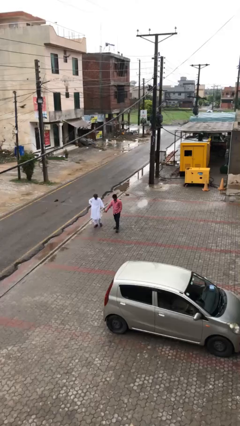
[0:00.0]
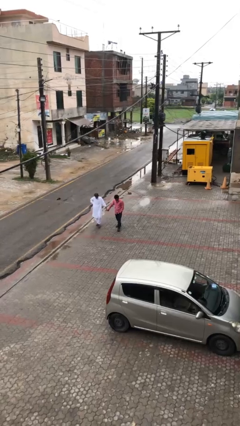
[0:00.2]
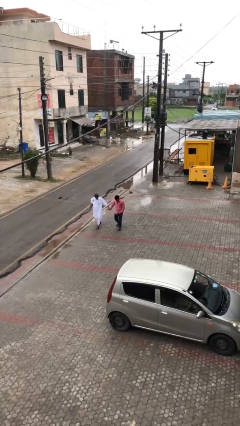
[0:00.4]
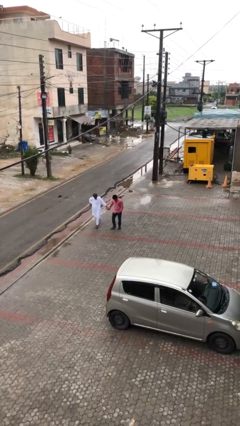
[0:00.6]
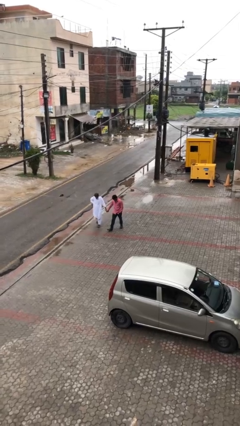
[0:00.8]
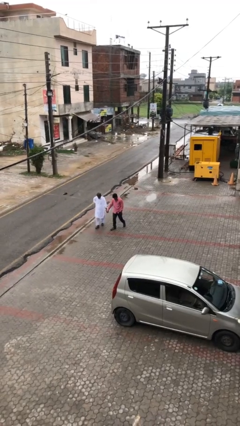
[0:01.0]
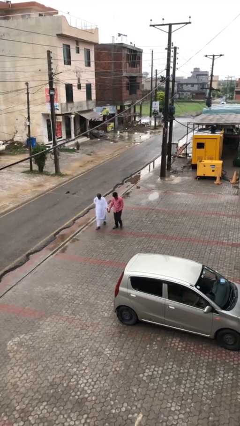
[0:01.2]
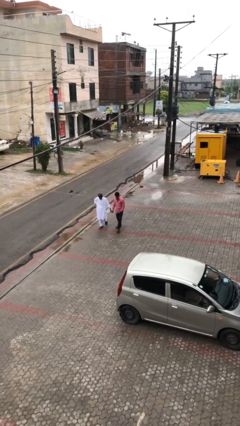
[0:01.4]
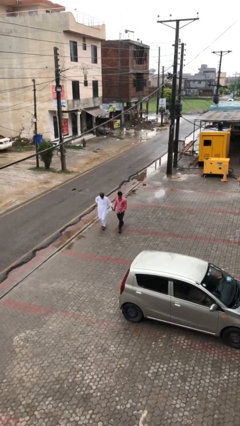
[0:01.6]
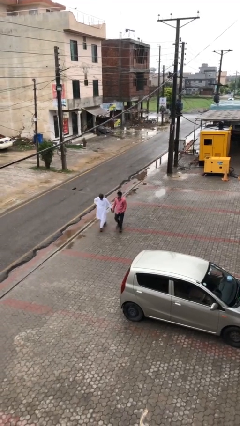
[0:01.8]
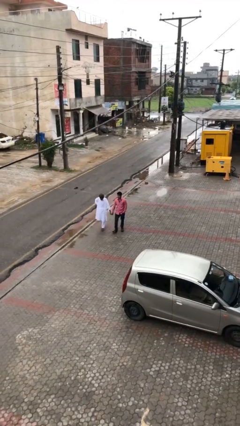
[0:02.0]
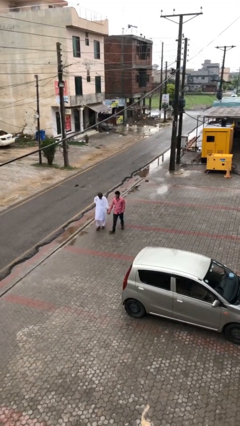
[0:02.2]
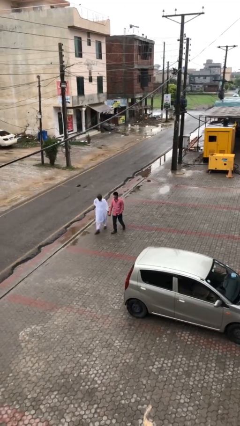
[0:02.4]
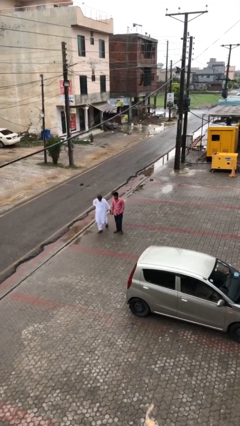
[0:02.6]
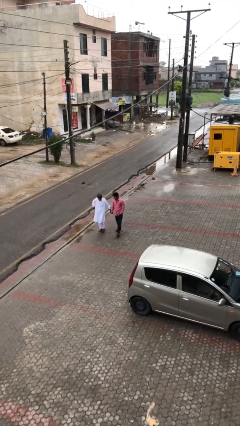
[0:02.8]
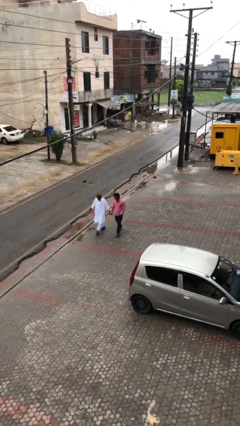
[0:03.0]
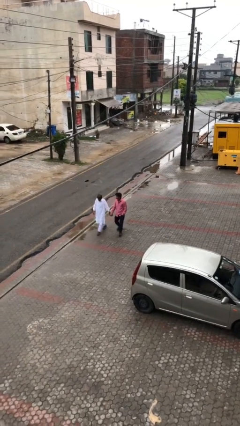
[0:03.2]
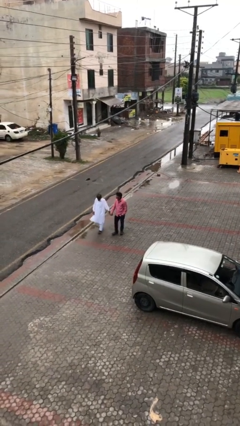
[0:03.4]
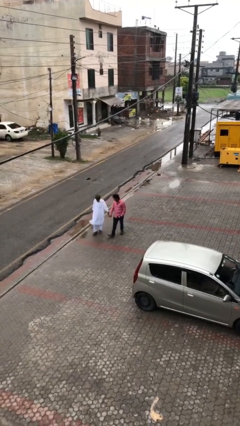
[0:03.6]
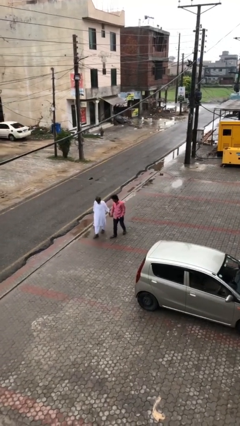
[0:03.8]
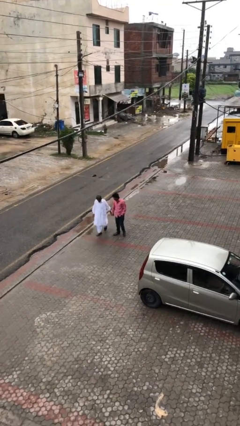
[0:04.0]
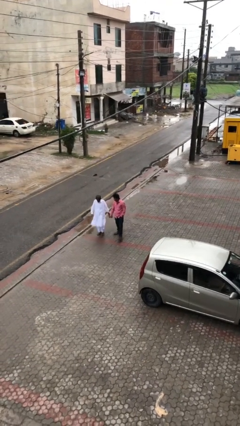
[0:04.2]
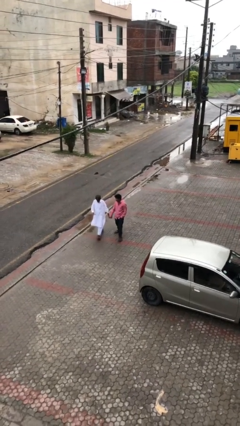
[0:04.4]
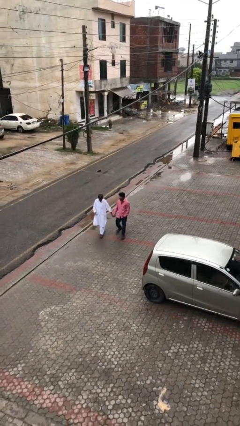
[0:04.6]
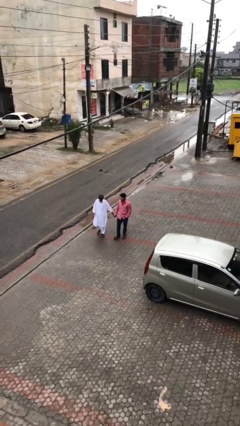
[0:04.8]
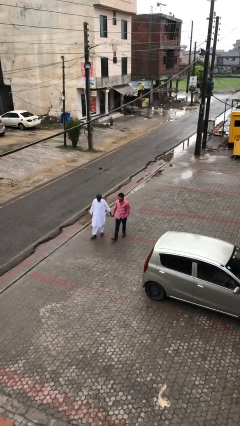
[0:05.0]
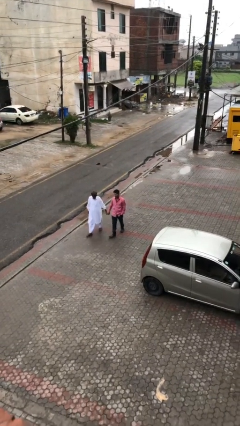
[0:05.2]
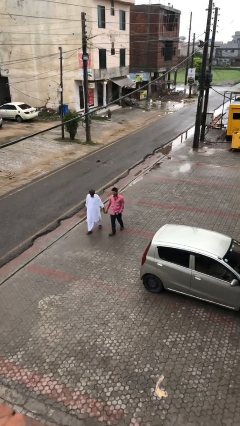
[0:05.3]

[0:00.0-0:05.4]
person holds hand

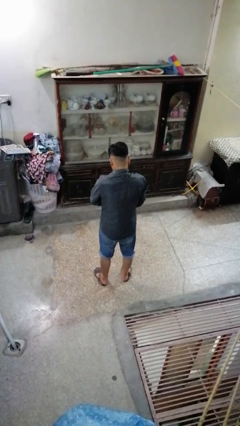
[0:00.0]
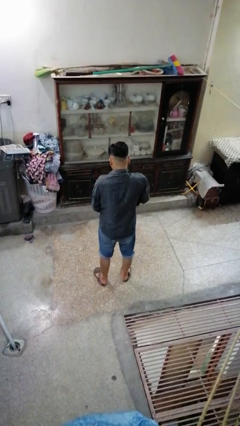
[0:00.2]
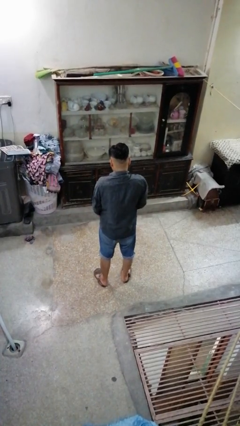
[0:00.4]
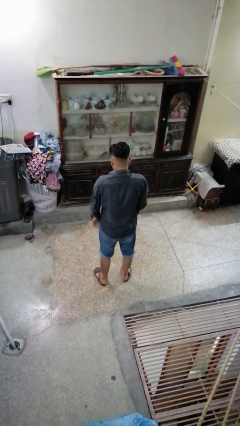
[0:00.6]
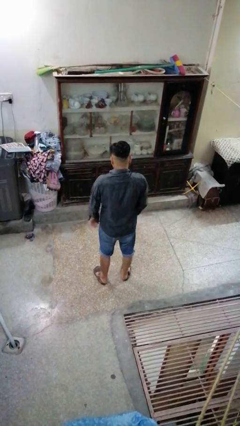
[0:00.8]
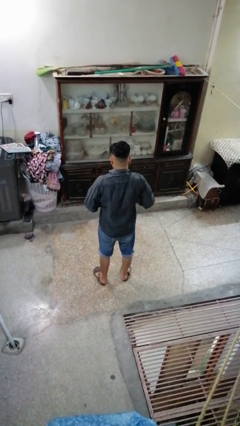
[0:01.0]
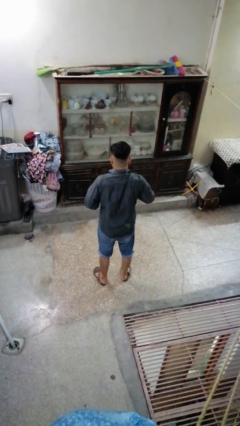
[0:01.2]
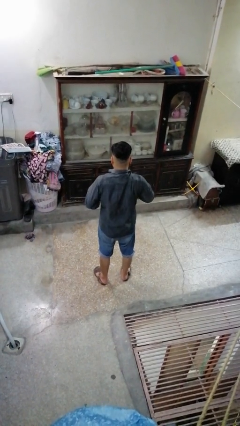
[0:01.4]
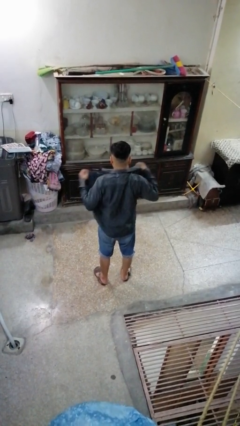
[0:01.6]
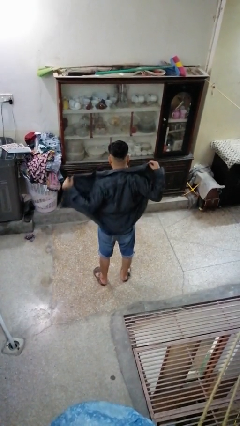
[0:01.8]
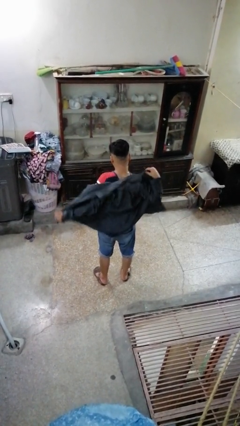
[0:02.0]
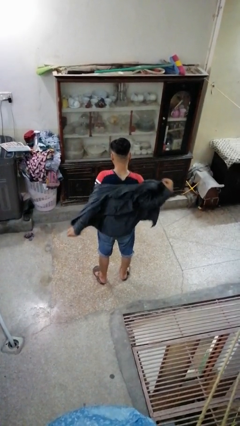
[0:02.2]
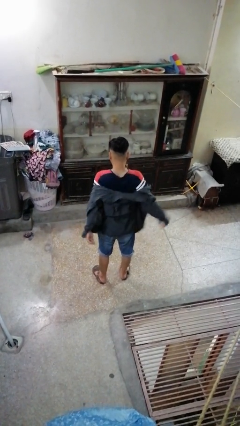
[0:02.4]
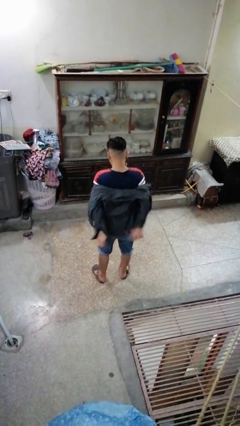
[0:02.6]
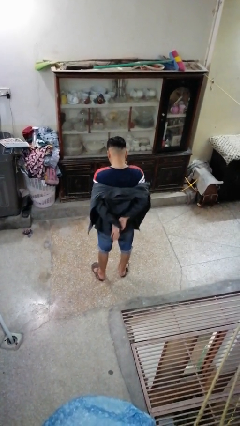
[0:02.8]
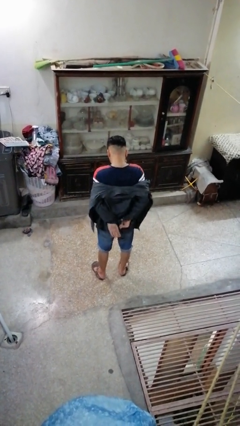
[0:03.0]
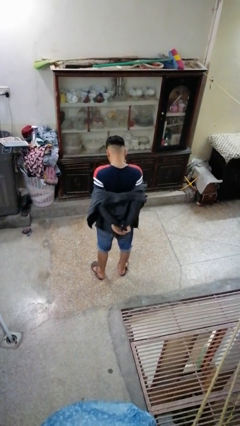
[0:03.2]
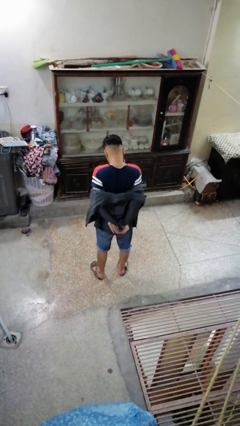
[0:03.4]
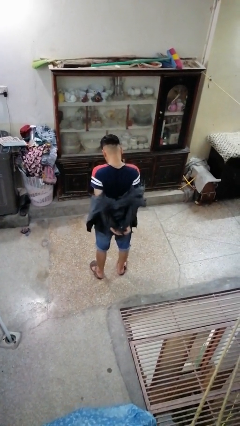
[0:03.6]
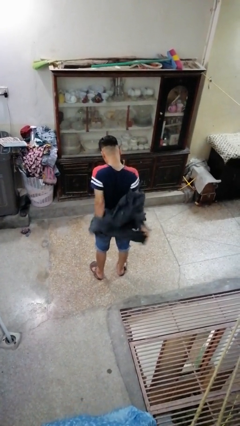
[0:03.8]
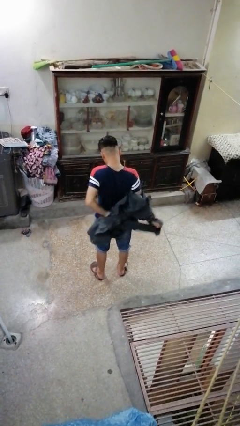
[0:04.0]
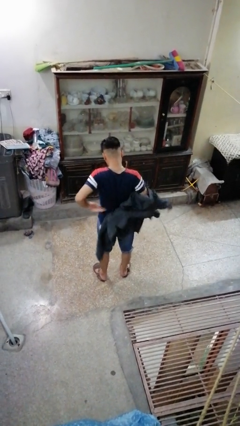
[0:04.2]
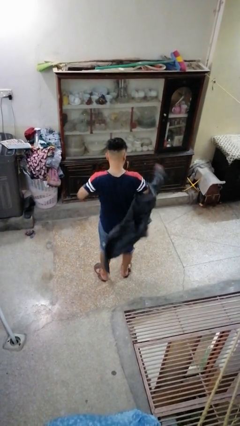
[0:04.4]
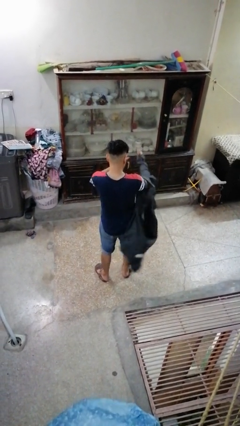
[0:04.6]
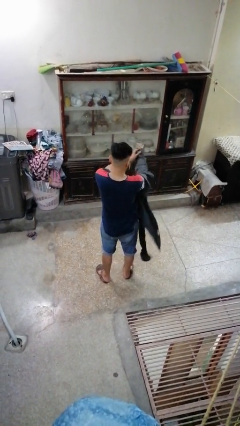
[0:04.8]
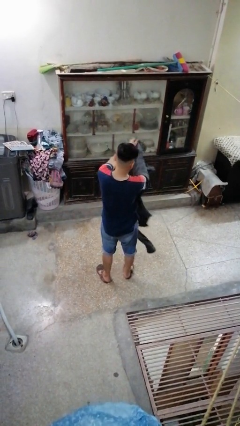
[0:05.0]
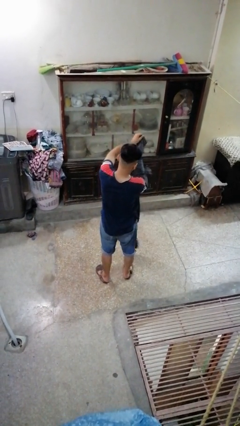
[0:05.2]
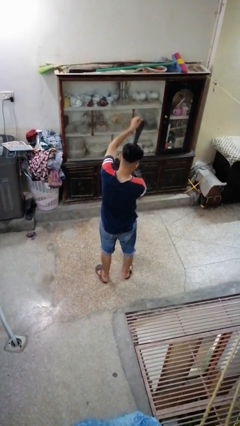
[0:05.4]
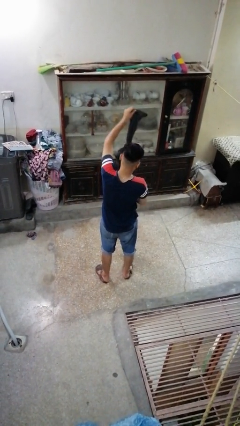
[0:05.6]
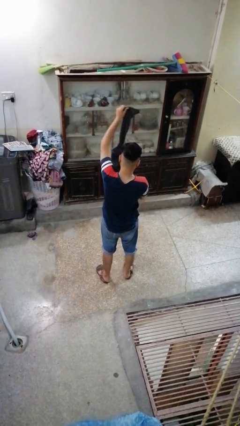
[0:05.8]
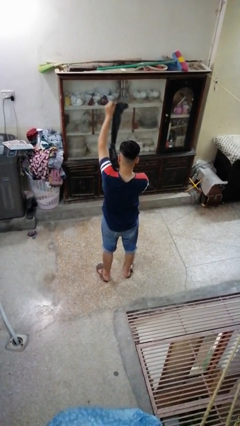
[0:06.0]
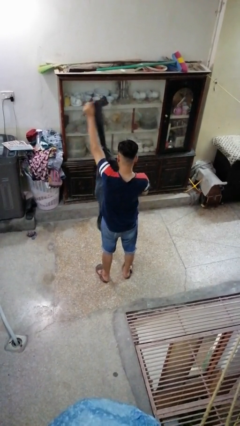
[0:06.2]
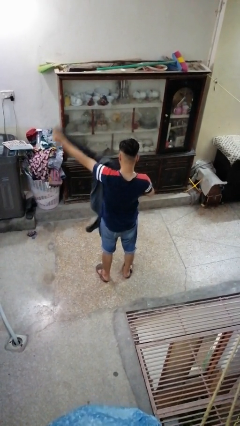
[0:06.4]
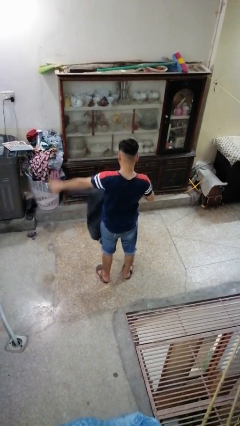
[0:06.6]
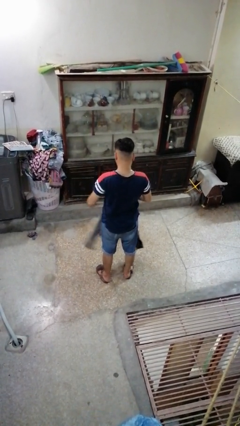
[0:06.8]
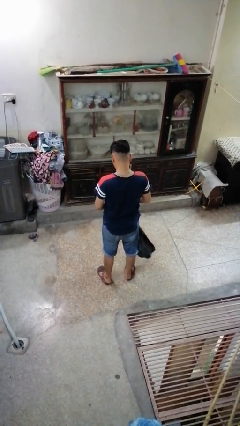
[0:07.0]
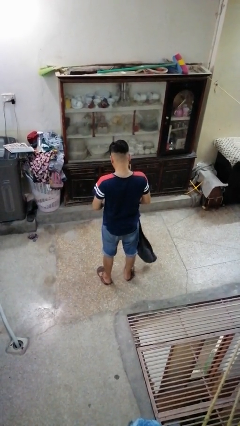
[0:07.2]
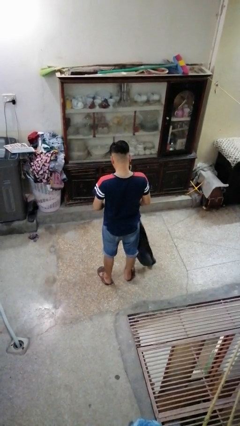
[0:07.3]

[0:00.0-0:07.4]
person takes off shirt

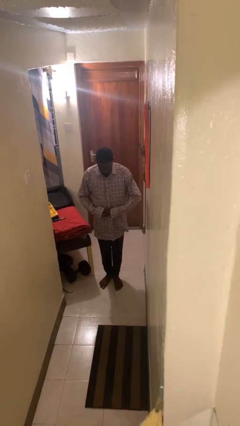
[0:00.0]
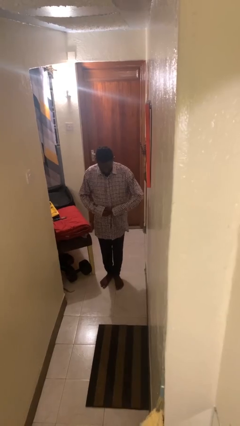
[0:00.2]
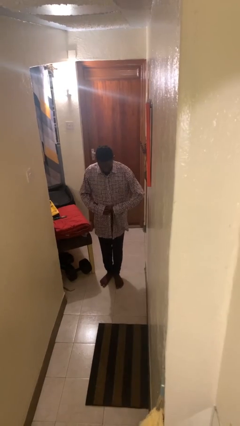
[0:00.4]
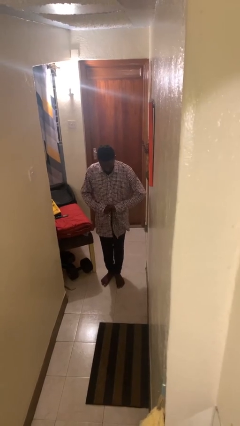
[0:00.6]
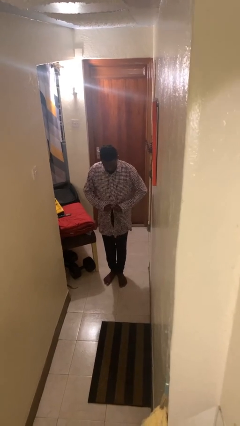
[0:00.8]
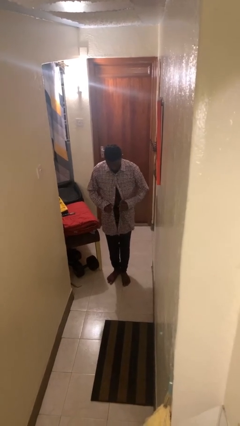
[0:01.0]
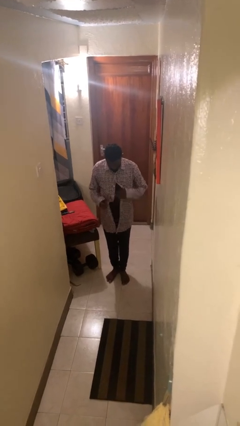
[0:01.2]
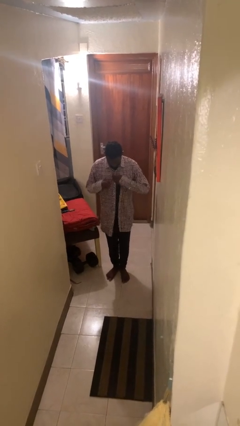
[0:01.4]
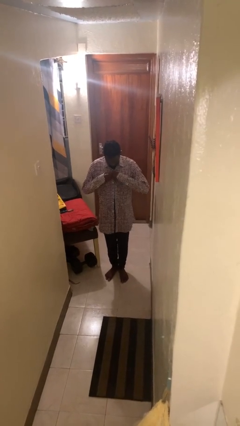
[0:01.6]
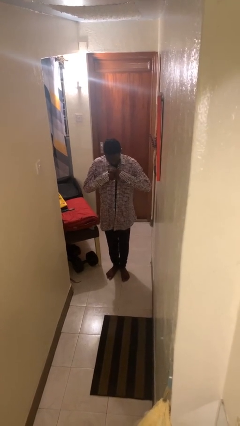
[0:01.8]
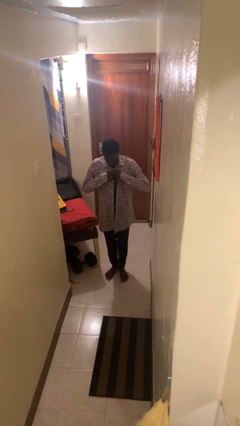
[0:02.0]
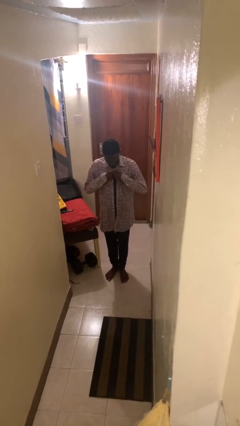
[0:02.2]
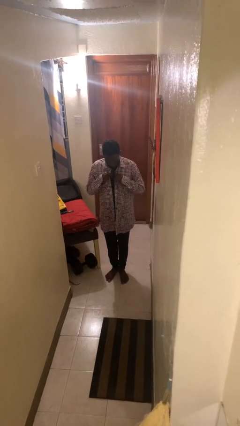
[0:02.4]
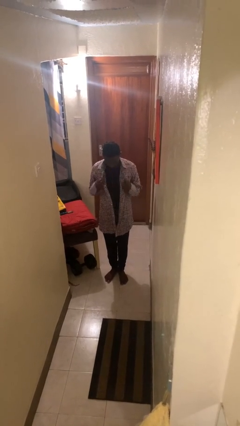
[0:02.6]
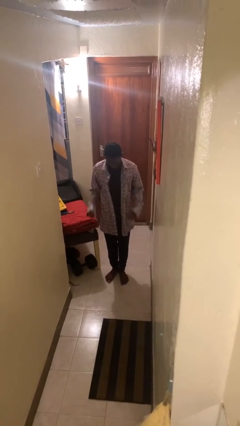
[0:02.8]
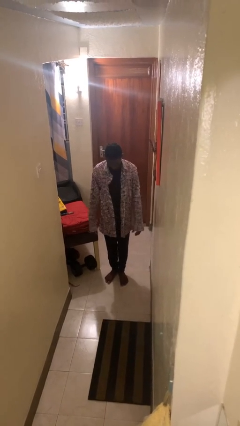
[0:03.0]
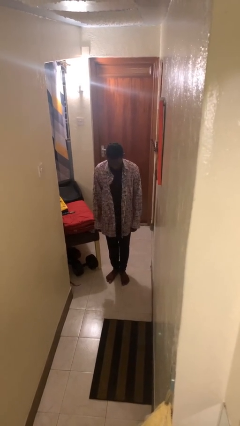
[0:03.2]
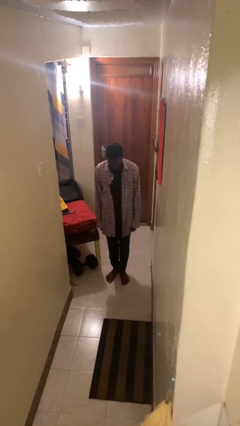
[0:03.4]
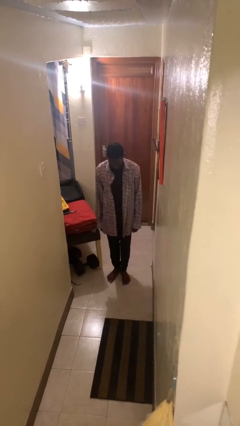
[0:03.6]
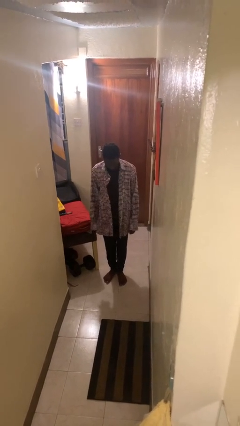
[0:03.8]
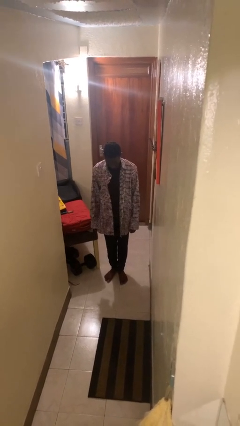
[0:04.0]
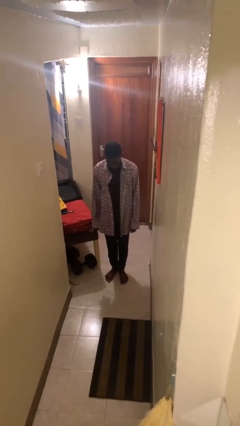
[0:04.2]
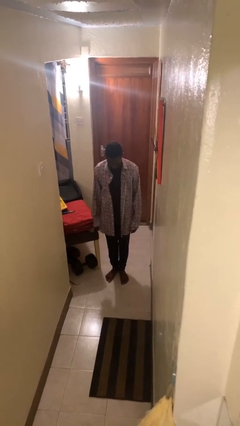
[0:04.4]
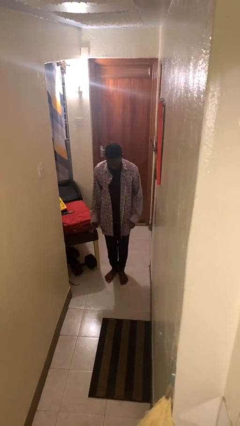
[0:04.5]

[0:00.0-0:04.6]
person unbuttons shirt
